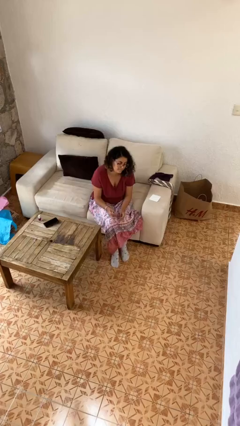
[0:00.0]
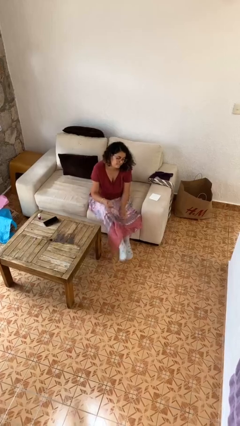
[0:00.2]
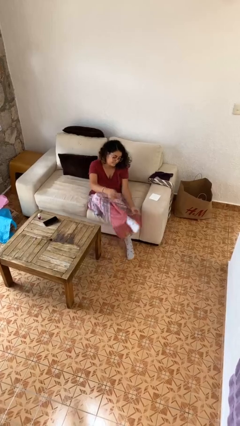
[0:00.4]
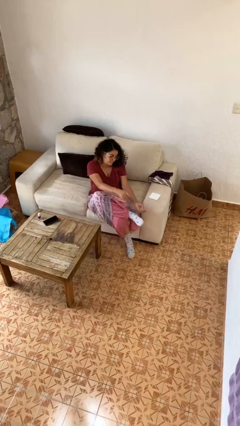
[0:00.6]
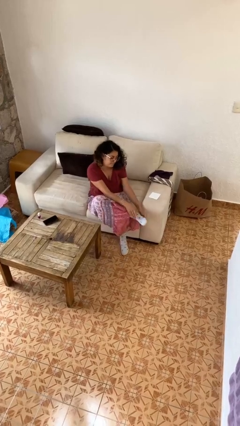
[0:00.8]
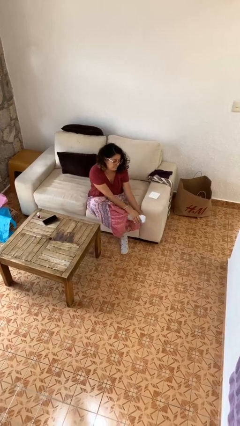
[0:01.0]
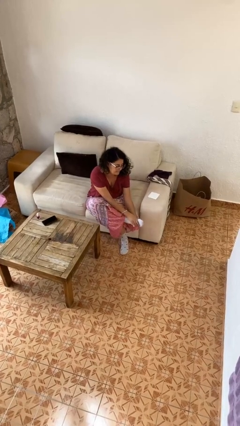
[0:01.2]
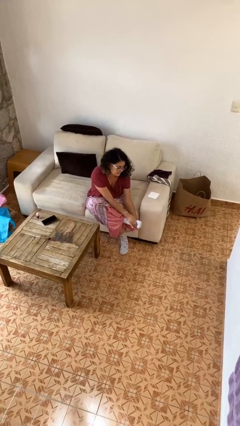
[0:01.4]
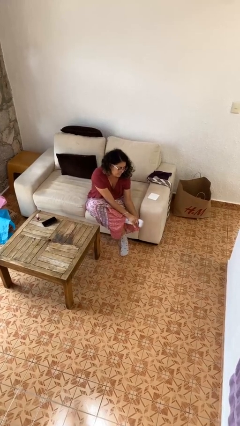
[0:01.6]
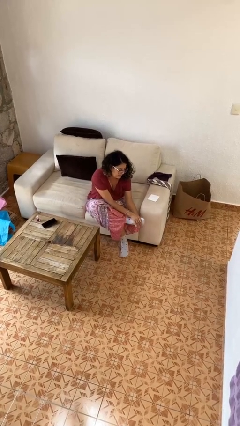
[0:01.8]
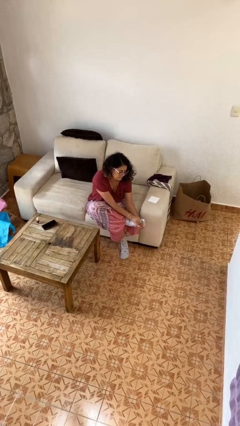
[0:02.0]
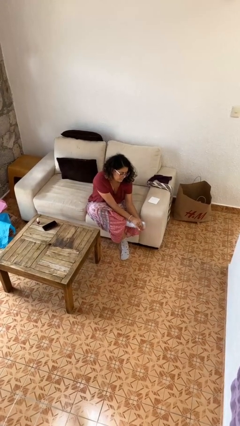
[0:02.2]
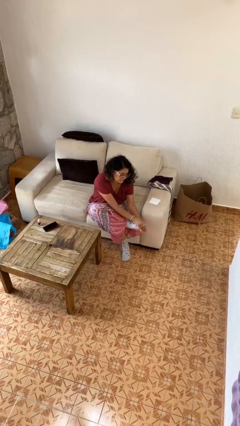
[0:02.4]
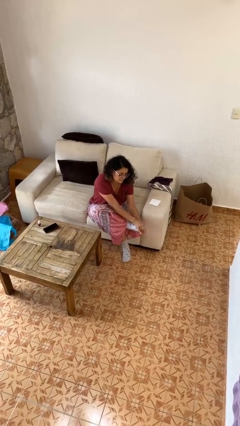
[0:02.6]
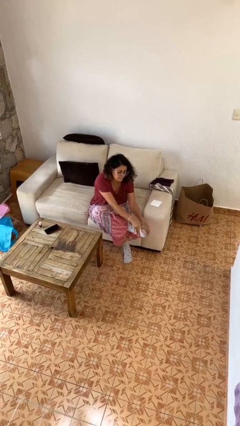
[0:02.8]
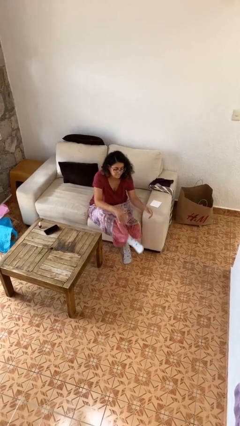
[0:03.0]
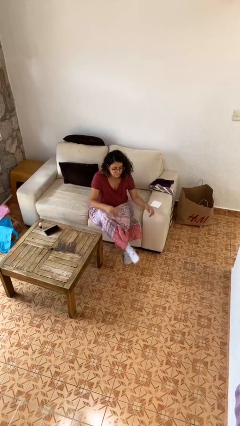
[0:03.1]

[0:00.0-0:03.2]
person rubs foot

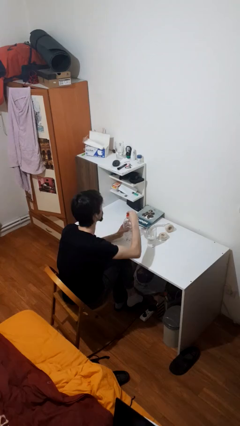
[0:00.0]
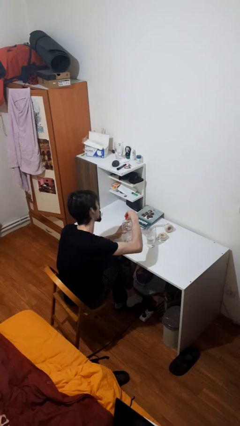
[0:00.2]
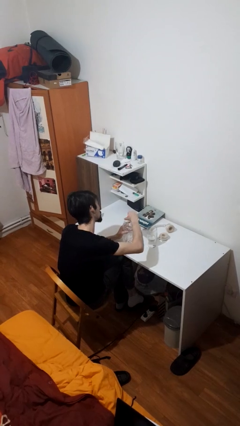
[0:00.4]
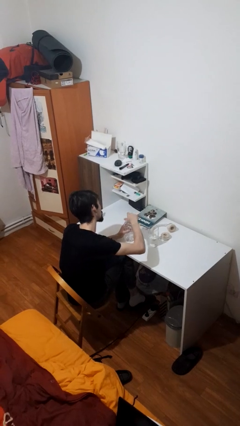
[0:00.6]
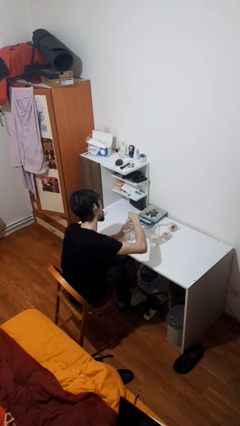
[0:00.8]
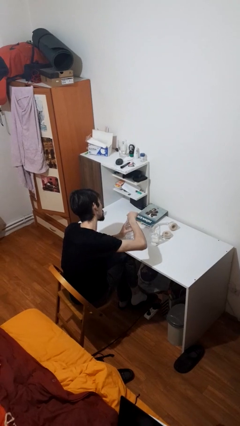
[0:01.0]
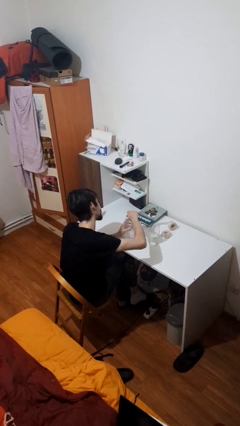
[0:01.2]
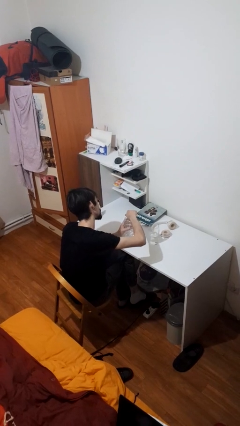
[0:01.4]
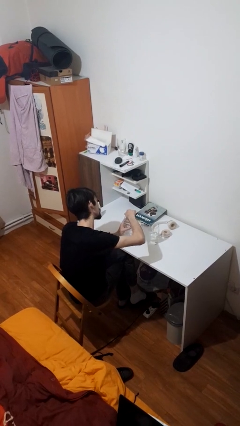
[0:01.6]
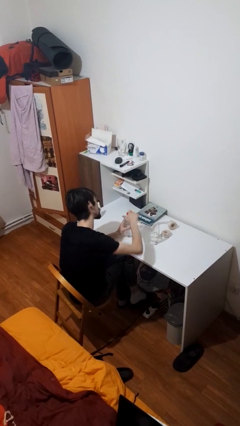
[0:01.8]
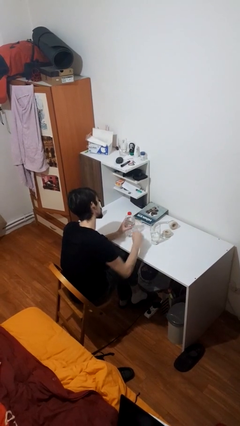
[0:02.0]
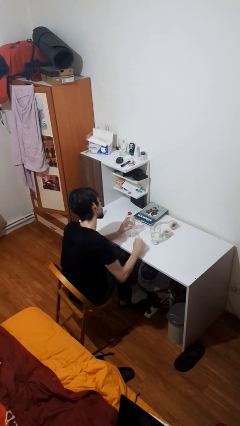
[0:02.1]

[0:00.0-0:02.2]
person screws lid to bottle

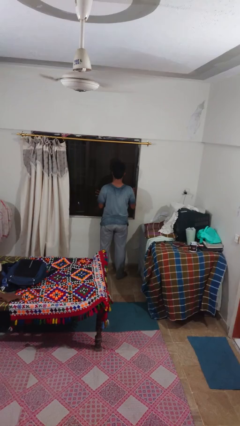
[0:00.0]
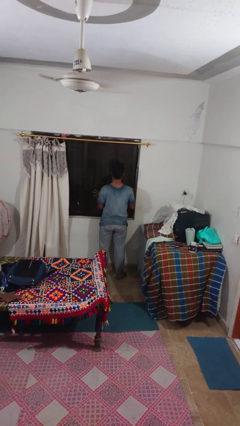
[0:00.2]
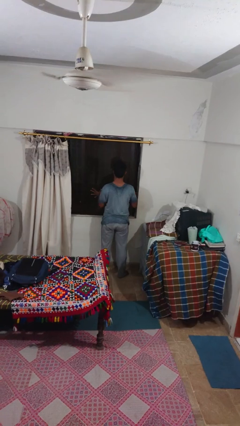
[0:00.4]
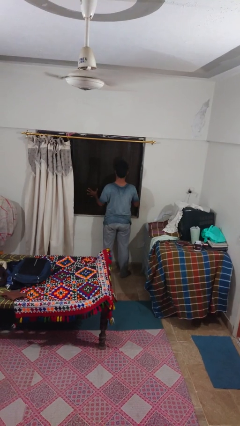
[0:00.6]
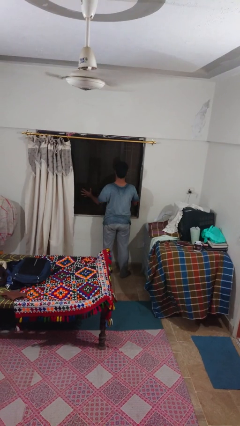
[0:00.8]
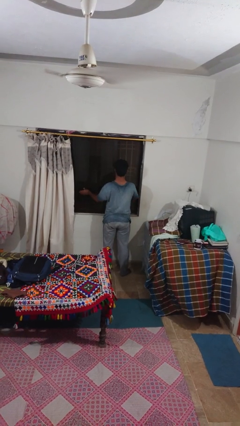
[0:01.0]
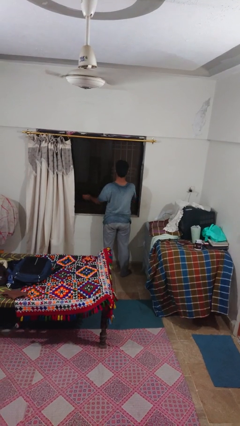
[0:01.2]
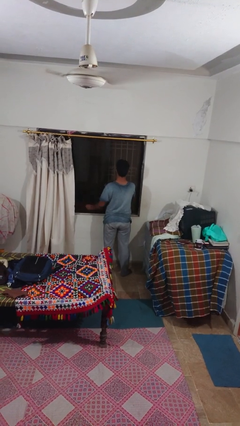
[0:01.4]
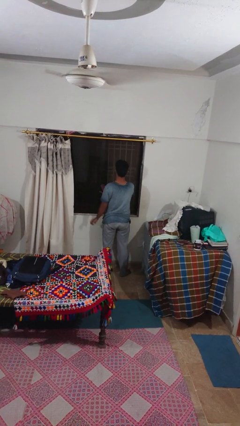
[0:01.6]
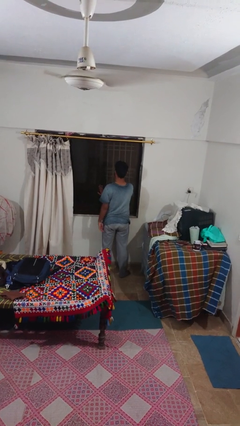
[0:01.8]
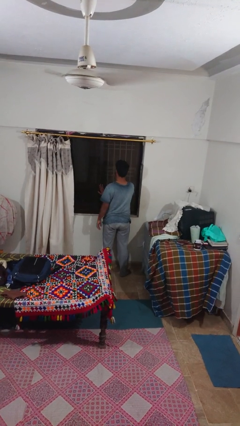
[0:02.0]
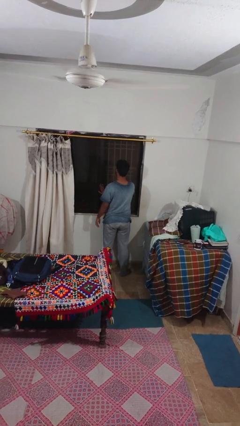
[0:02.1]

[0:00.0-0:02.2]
person opens sliding door

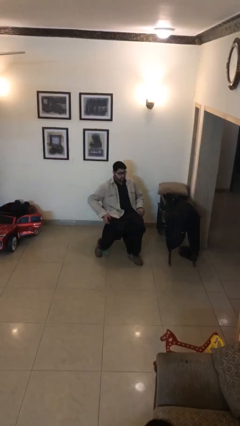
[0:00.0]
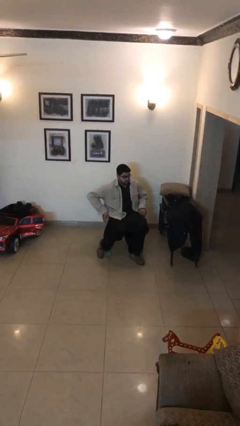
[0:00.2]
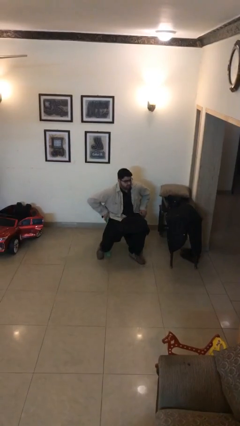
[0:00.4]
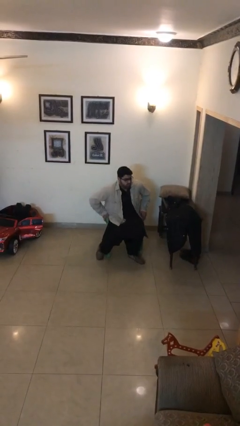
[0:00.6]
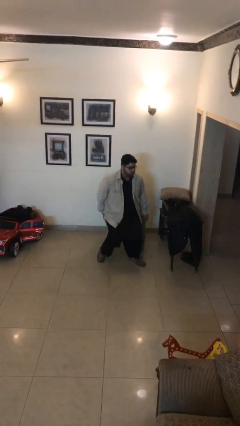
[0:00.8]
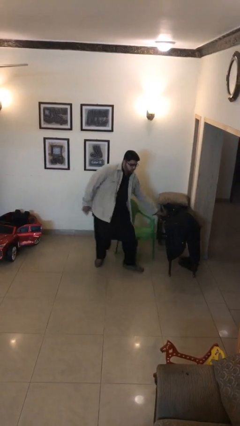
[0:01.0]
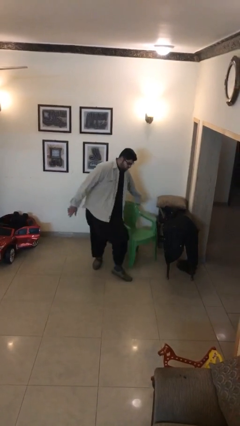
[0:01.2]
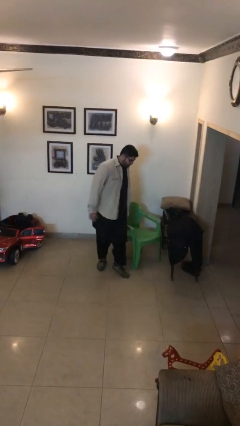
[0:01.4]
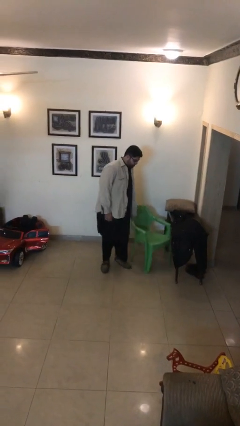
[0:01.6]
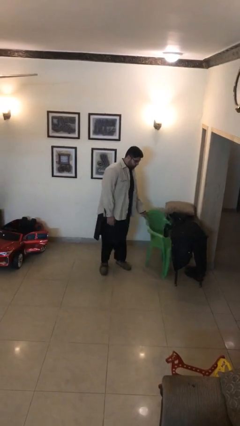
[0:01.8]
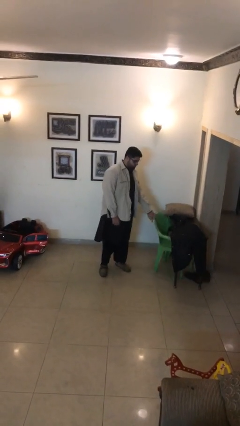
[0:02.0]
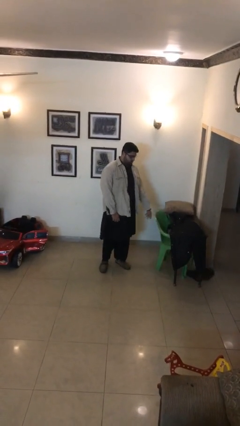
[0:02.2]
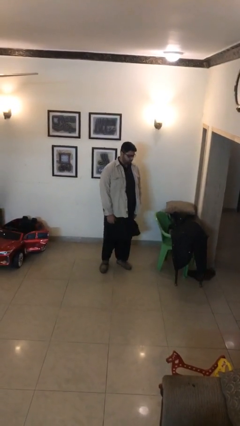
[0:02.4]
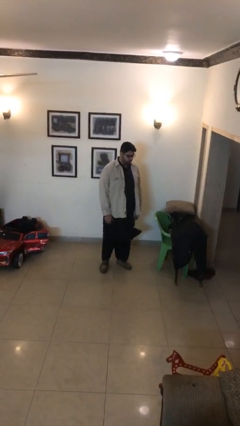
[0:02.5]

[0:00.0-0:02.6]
person stands up

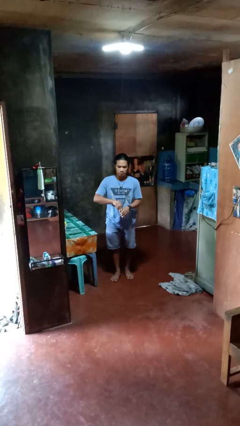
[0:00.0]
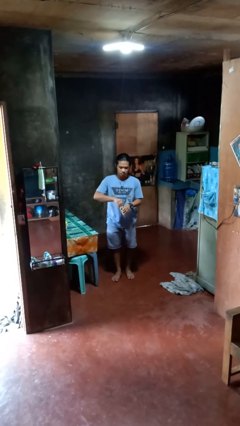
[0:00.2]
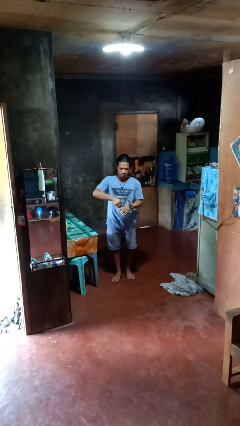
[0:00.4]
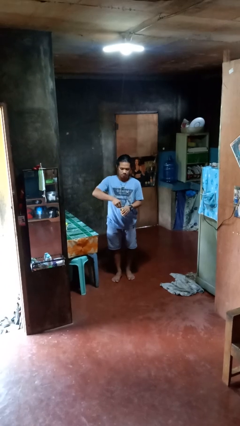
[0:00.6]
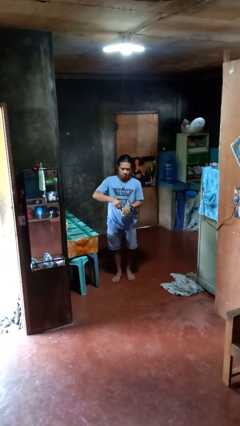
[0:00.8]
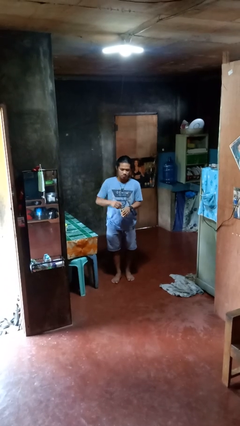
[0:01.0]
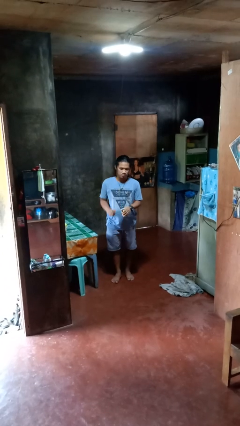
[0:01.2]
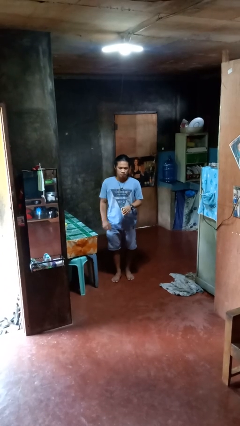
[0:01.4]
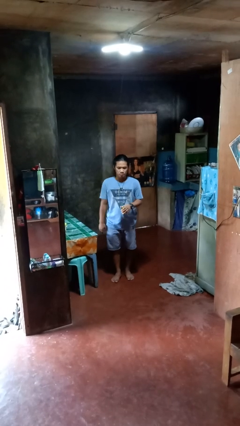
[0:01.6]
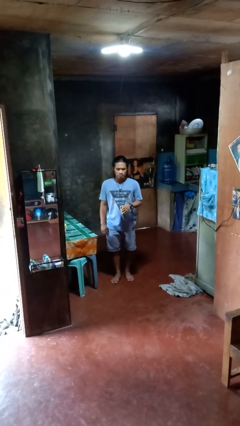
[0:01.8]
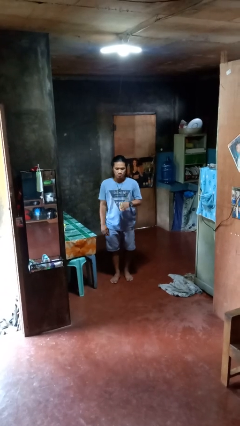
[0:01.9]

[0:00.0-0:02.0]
person opens beverage can

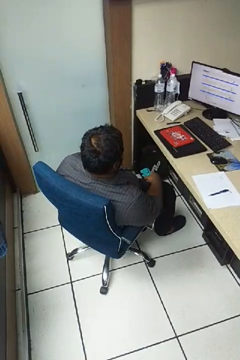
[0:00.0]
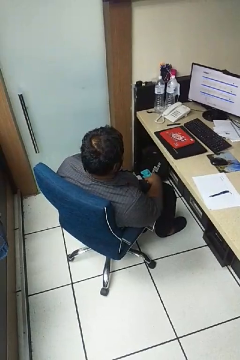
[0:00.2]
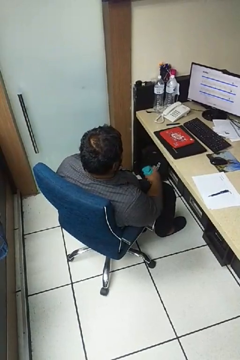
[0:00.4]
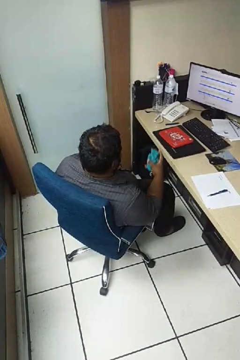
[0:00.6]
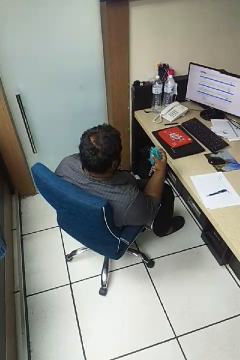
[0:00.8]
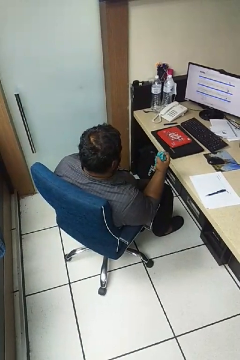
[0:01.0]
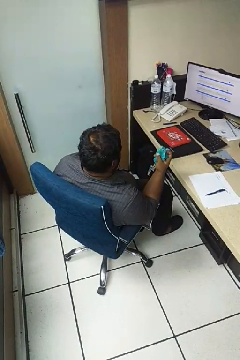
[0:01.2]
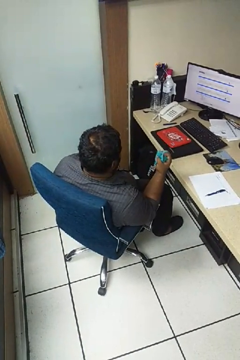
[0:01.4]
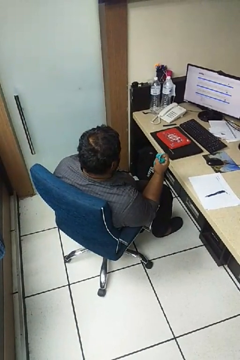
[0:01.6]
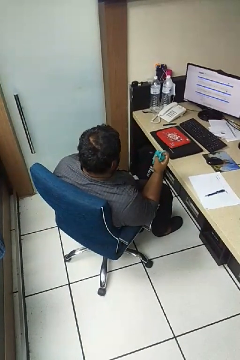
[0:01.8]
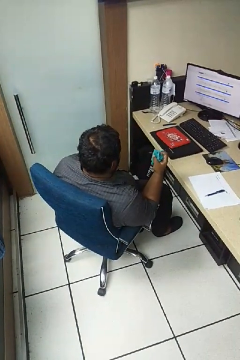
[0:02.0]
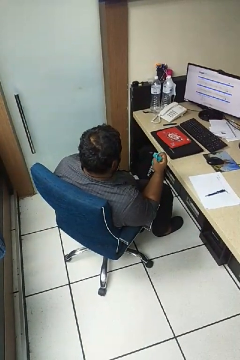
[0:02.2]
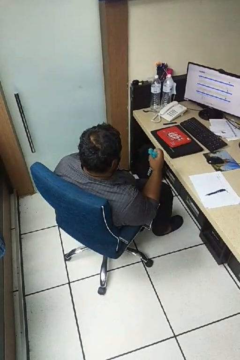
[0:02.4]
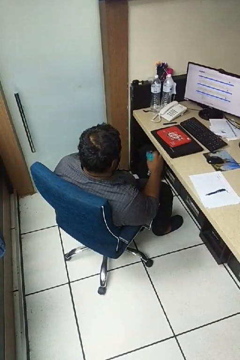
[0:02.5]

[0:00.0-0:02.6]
person squeezes object

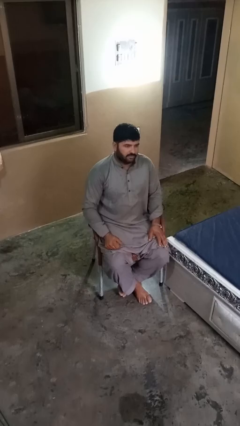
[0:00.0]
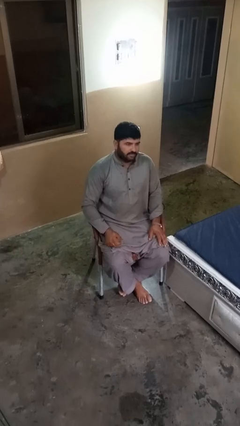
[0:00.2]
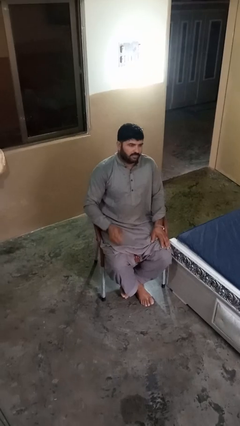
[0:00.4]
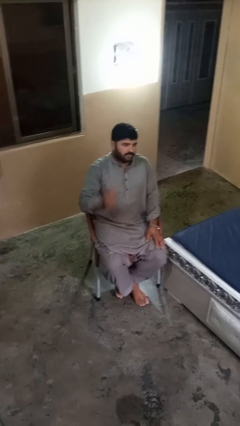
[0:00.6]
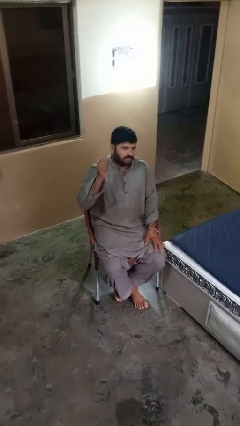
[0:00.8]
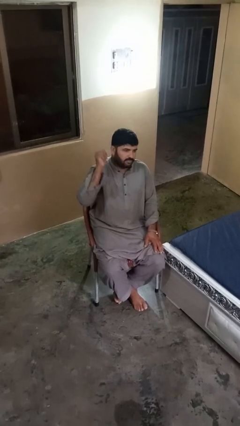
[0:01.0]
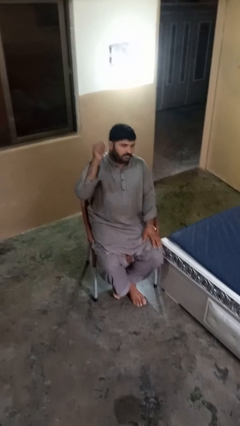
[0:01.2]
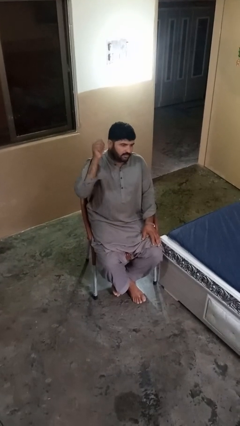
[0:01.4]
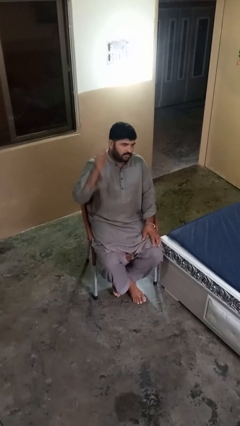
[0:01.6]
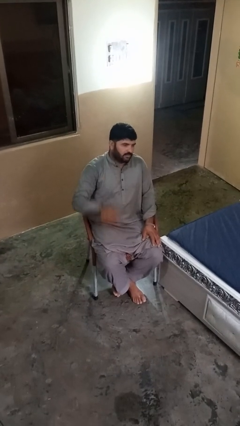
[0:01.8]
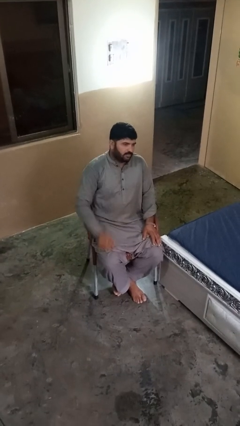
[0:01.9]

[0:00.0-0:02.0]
person gestures behind me

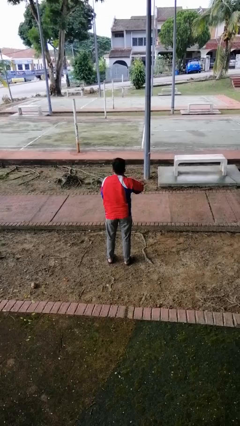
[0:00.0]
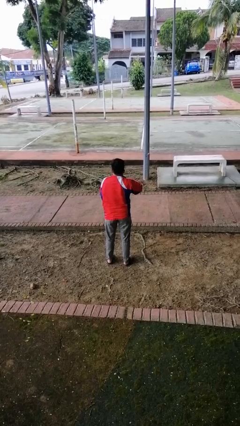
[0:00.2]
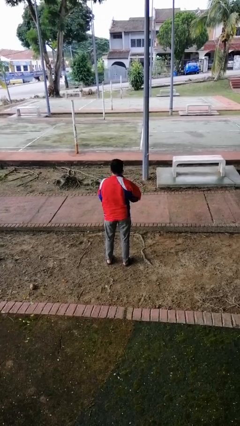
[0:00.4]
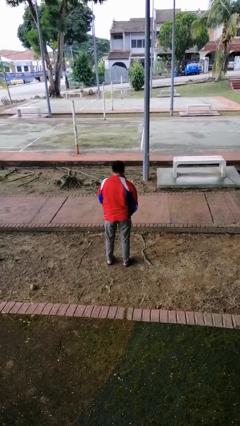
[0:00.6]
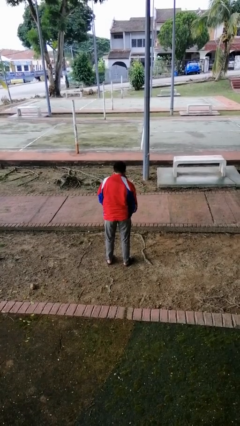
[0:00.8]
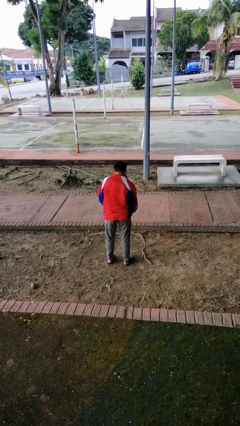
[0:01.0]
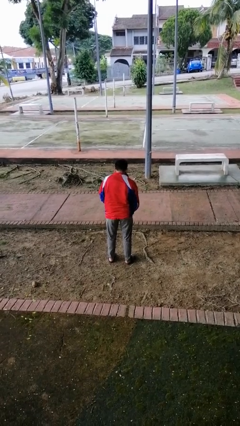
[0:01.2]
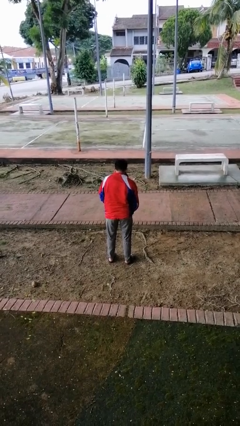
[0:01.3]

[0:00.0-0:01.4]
person unzips jacket
